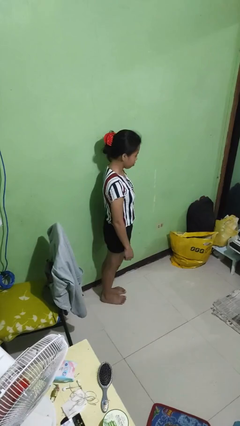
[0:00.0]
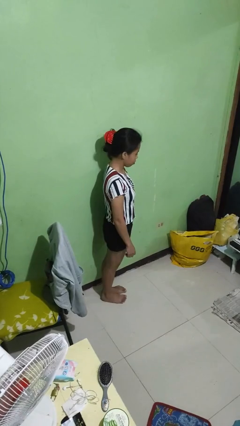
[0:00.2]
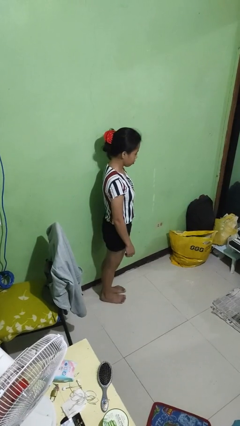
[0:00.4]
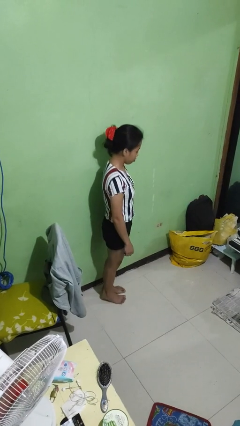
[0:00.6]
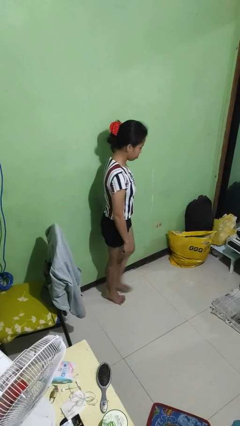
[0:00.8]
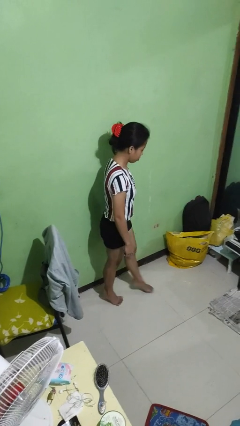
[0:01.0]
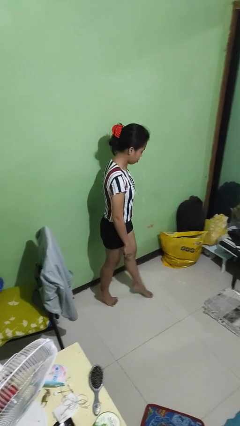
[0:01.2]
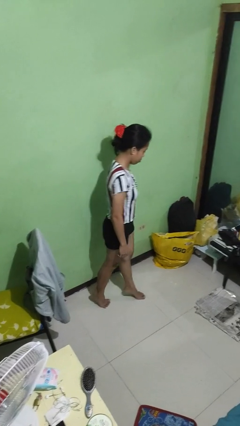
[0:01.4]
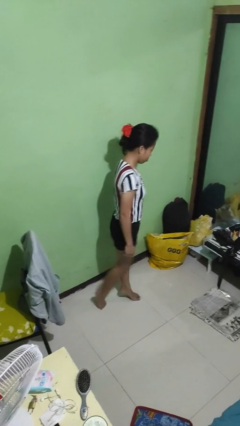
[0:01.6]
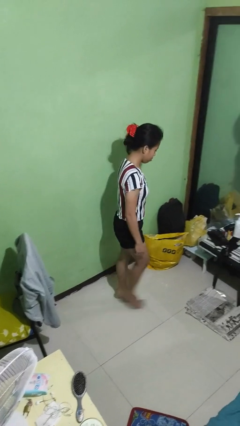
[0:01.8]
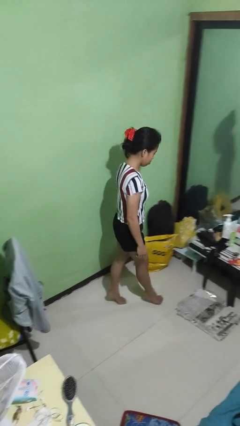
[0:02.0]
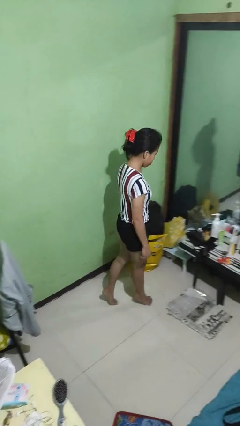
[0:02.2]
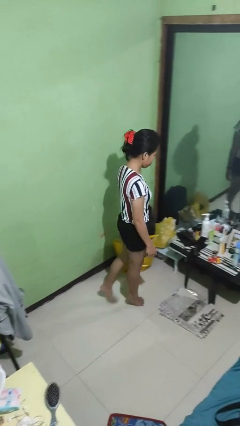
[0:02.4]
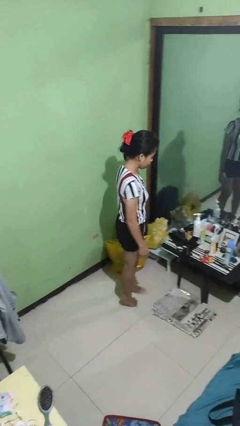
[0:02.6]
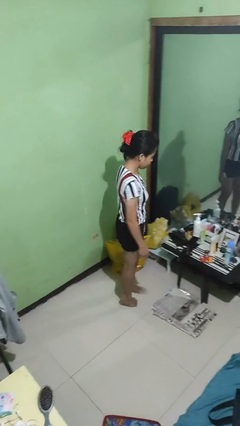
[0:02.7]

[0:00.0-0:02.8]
person walks tiptoe

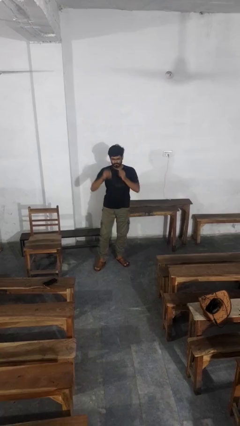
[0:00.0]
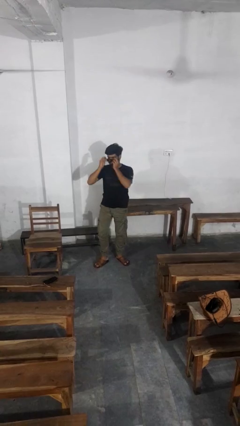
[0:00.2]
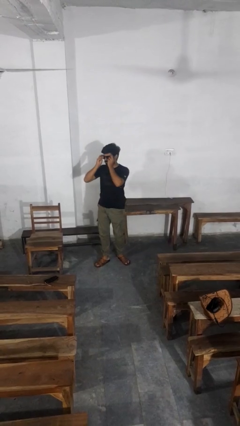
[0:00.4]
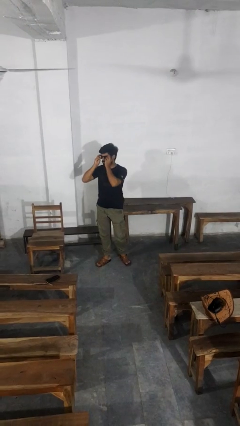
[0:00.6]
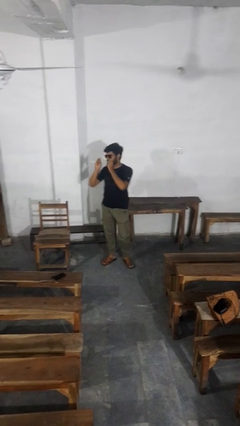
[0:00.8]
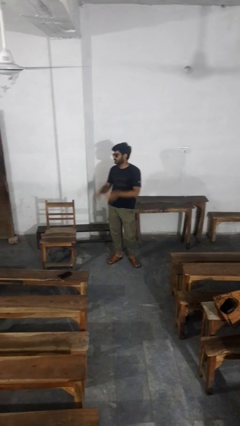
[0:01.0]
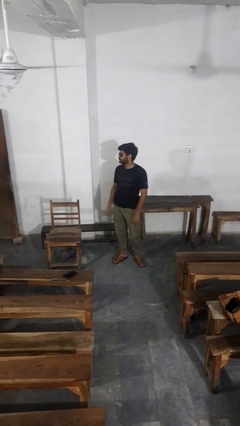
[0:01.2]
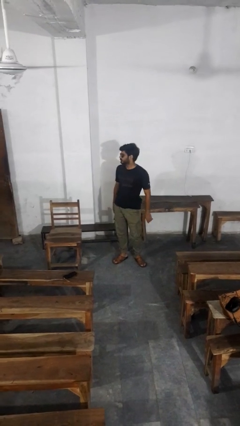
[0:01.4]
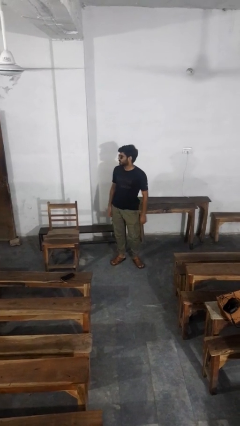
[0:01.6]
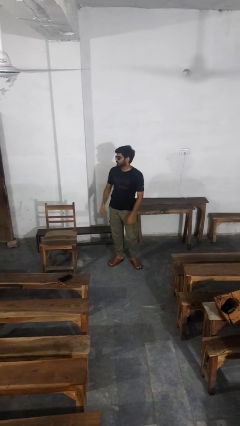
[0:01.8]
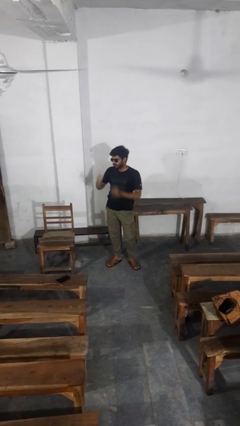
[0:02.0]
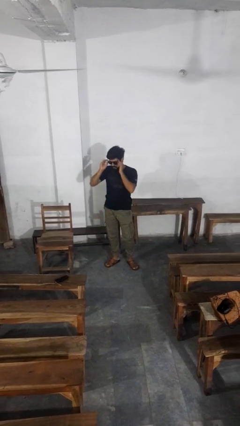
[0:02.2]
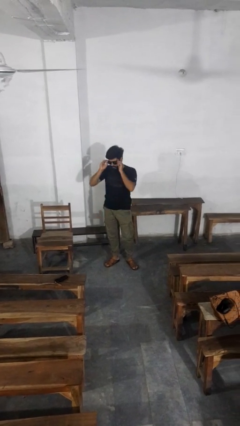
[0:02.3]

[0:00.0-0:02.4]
person puts on sunglasses

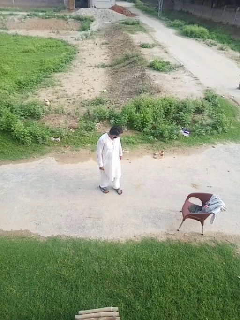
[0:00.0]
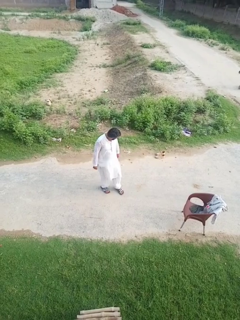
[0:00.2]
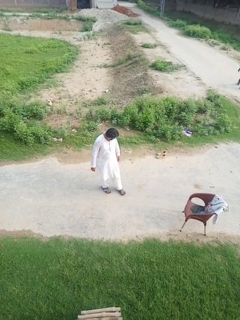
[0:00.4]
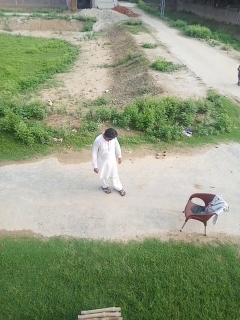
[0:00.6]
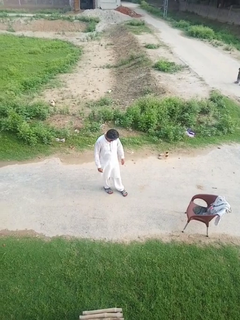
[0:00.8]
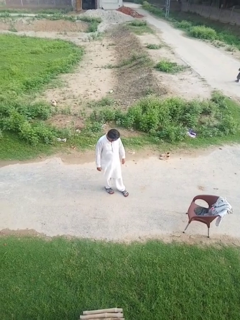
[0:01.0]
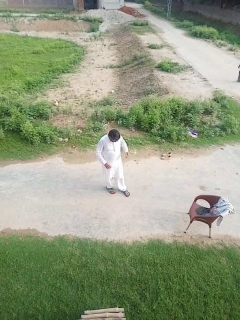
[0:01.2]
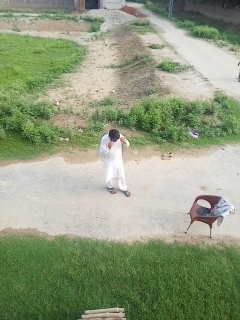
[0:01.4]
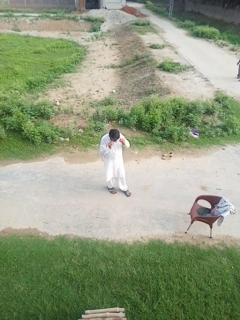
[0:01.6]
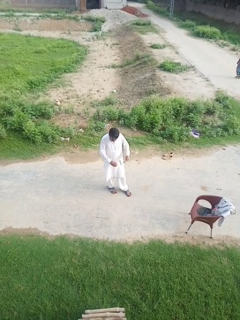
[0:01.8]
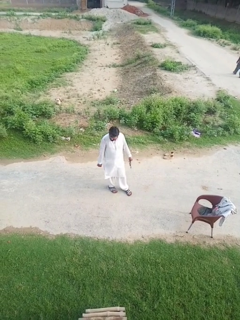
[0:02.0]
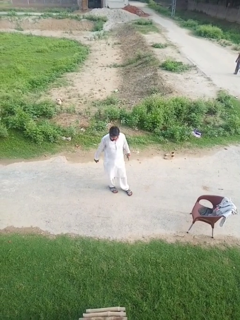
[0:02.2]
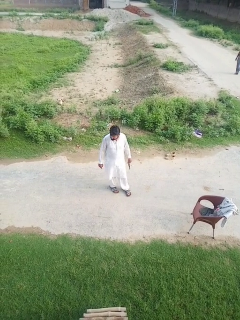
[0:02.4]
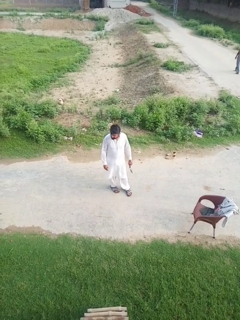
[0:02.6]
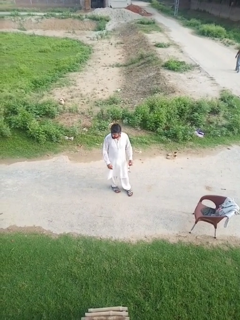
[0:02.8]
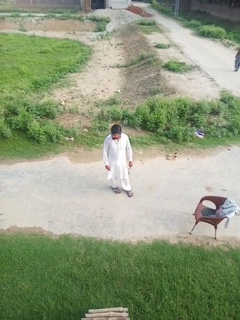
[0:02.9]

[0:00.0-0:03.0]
person takes off glasses

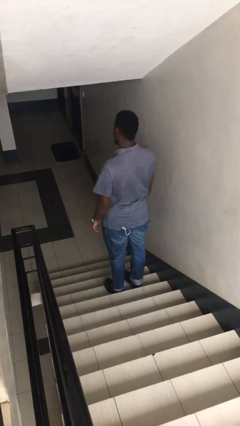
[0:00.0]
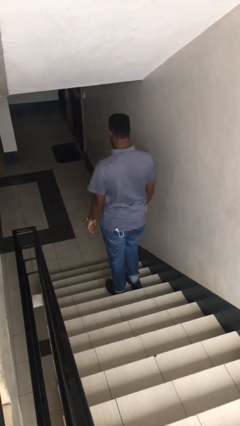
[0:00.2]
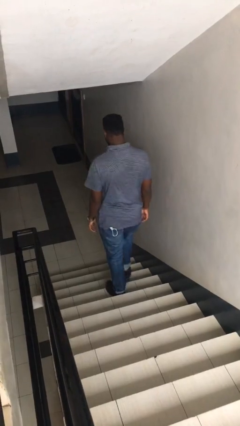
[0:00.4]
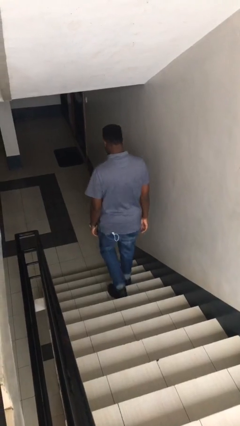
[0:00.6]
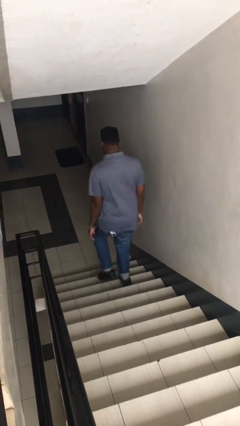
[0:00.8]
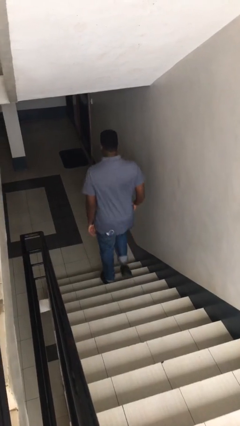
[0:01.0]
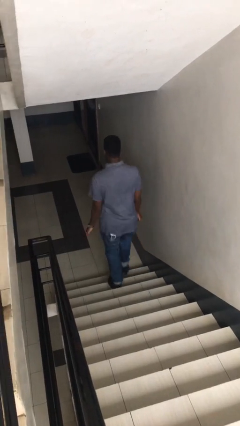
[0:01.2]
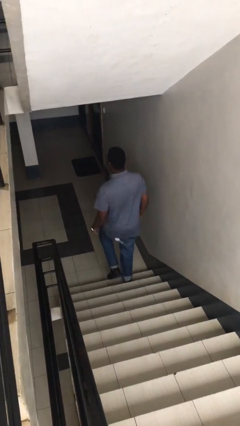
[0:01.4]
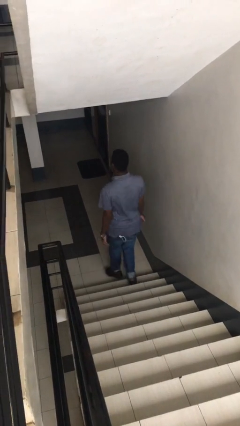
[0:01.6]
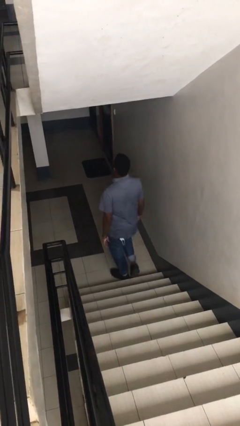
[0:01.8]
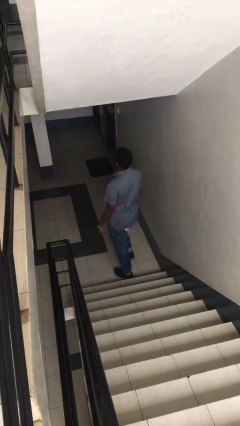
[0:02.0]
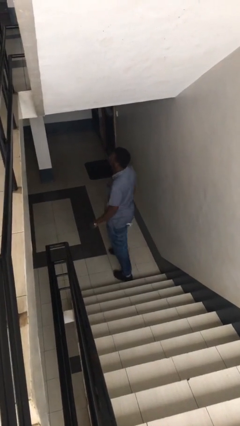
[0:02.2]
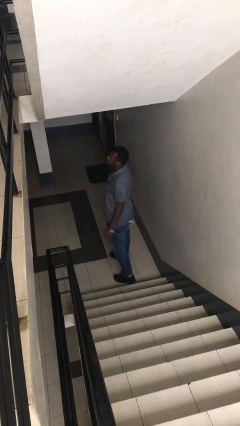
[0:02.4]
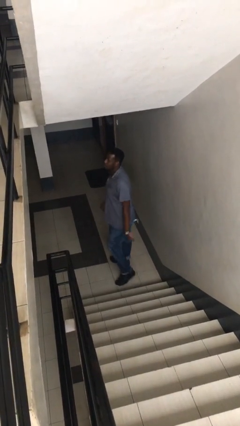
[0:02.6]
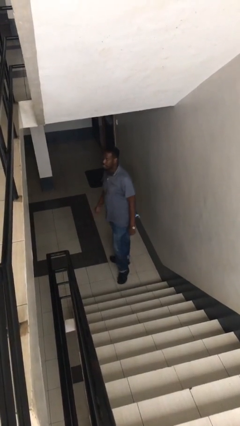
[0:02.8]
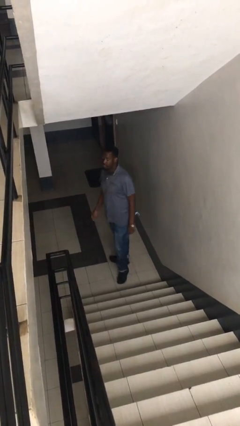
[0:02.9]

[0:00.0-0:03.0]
person climbs down stairs

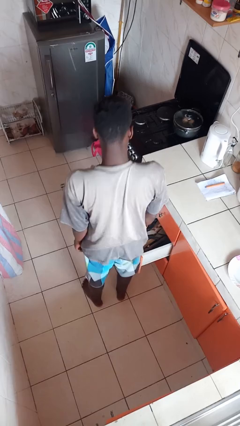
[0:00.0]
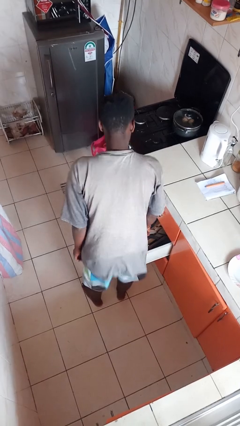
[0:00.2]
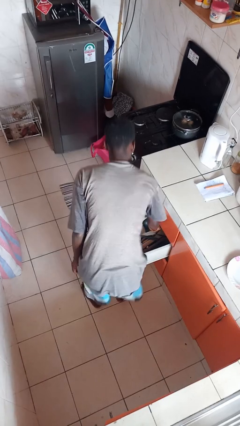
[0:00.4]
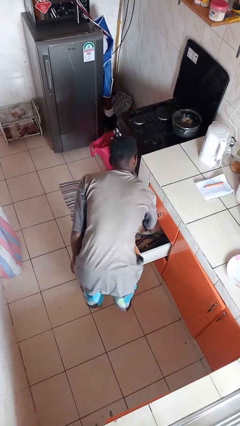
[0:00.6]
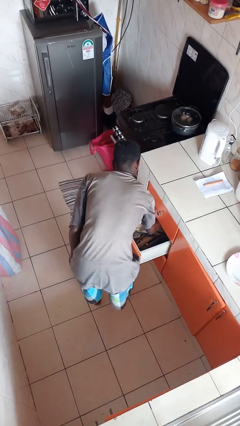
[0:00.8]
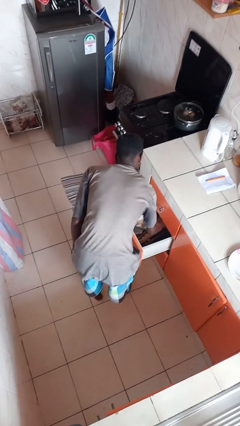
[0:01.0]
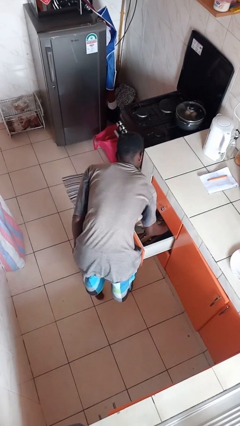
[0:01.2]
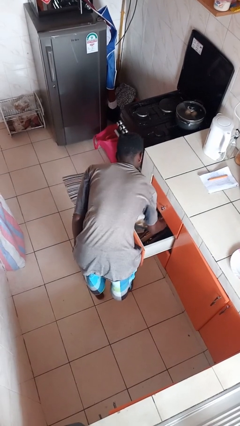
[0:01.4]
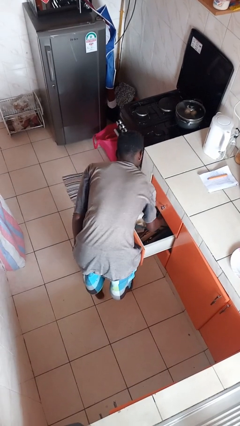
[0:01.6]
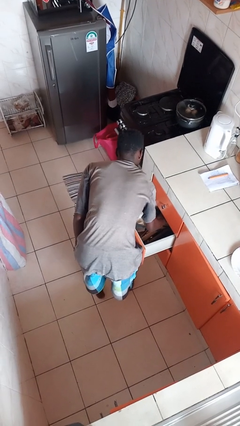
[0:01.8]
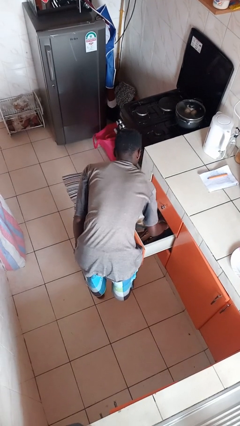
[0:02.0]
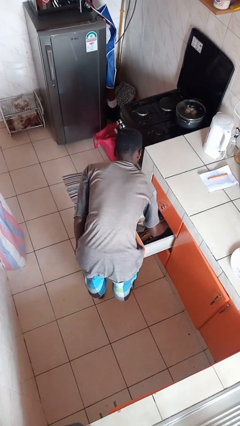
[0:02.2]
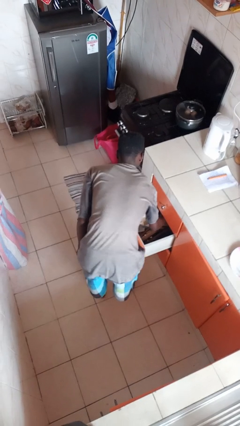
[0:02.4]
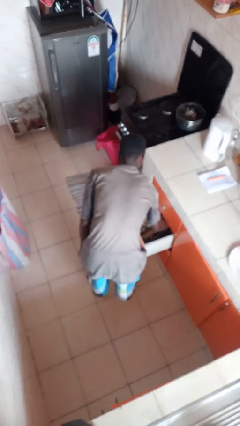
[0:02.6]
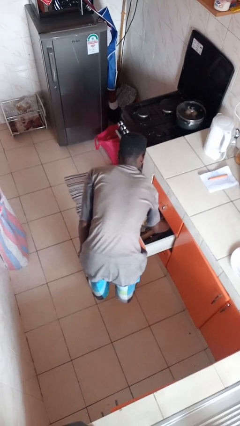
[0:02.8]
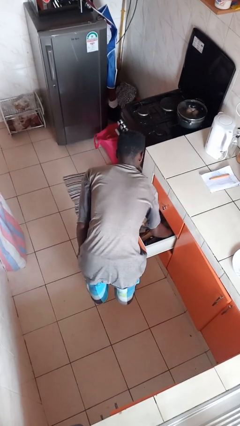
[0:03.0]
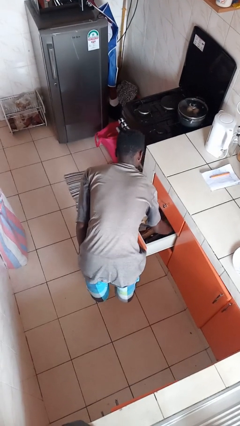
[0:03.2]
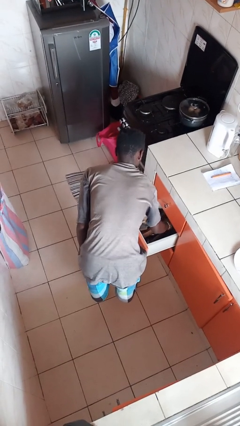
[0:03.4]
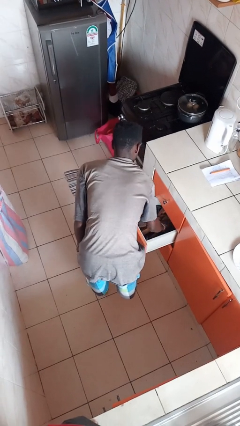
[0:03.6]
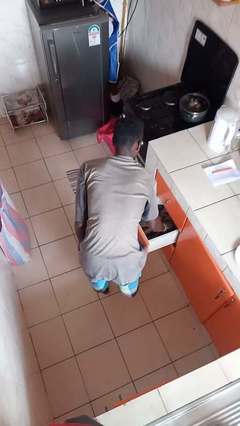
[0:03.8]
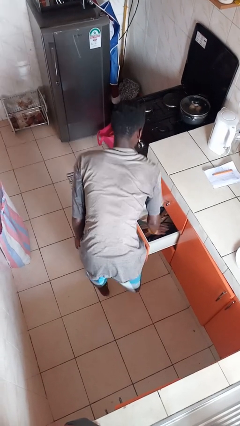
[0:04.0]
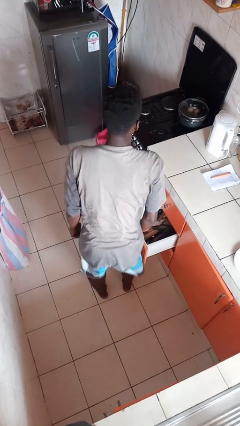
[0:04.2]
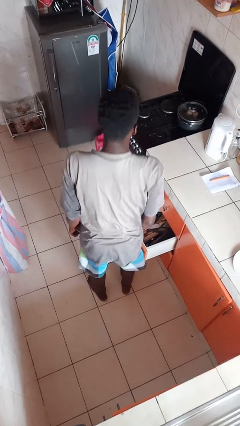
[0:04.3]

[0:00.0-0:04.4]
person searches in kitchen drawer

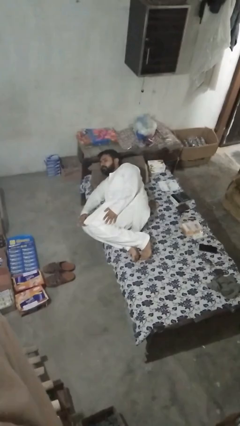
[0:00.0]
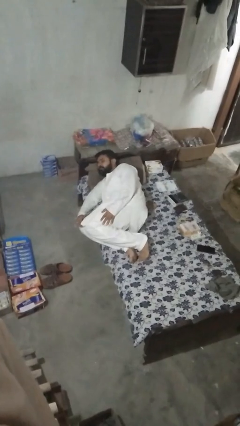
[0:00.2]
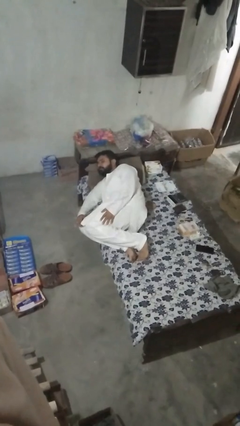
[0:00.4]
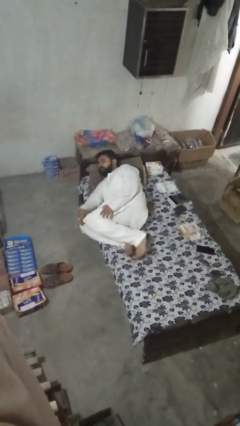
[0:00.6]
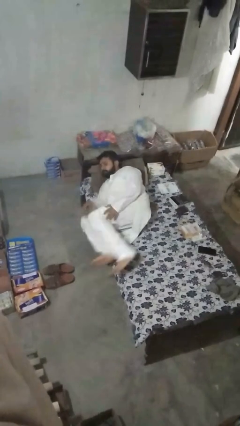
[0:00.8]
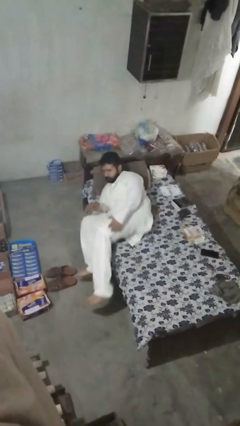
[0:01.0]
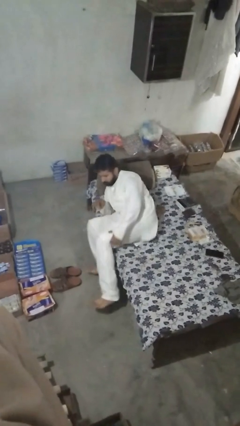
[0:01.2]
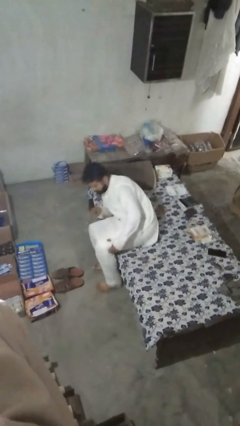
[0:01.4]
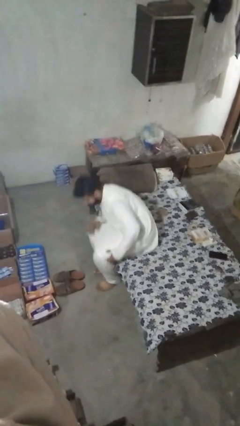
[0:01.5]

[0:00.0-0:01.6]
person stands up

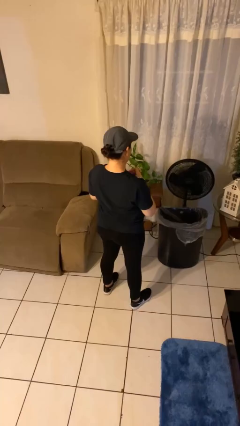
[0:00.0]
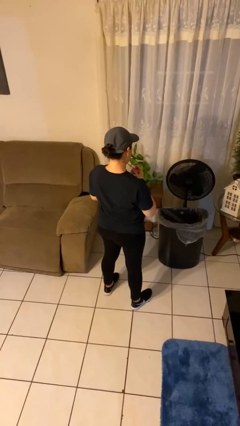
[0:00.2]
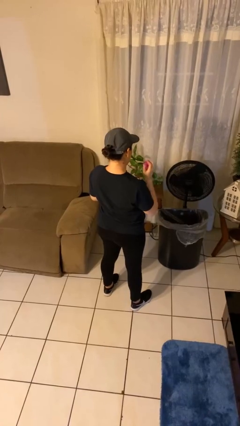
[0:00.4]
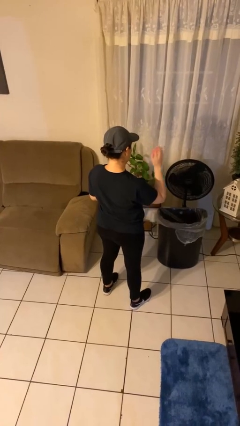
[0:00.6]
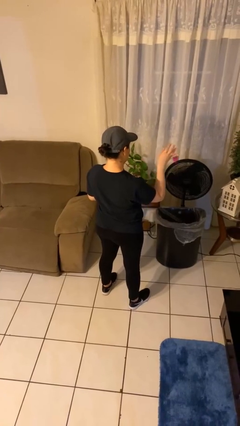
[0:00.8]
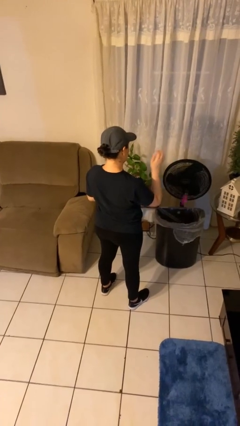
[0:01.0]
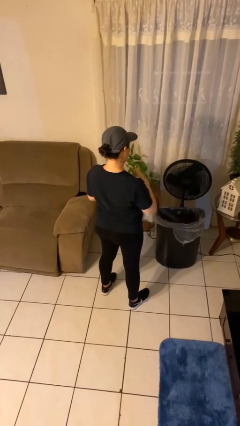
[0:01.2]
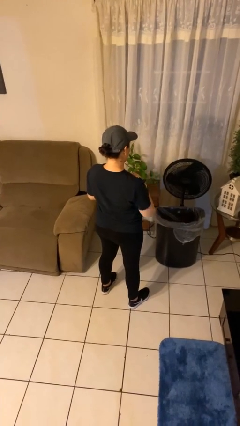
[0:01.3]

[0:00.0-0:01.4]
person discards trash
